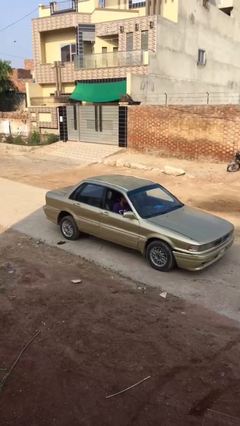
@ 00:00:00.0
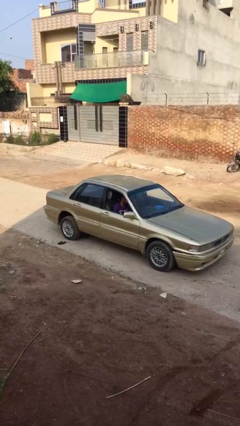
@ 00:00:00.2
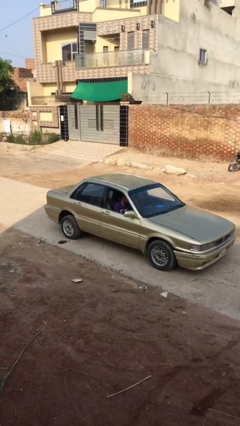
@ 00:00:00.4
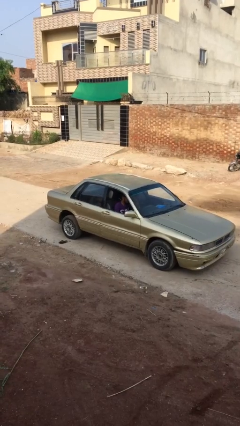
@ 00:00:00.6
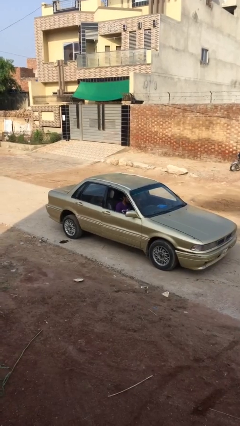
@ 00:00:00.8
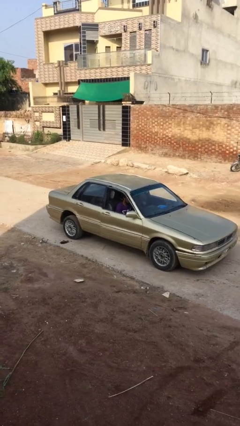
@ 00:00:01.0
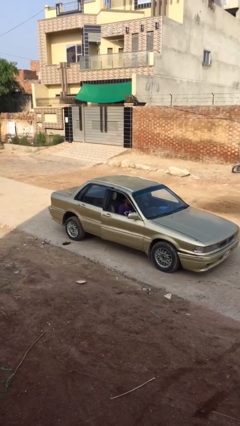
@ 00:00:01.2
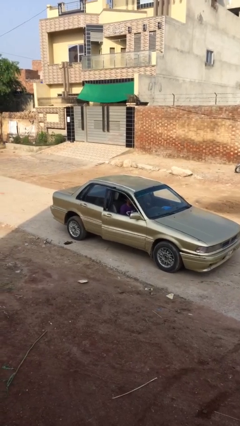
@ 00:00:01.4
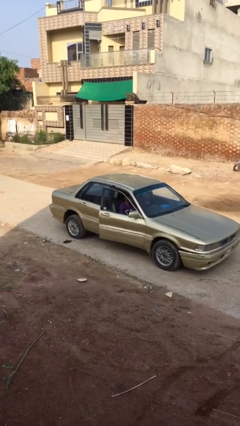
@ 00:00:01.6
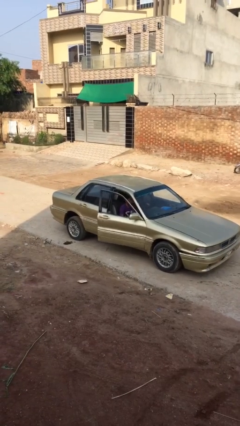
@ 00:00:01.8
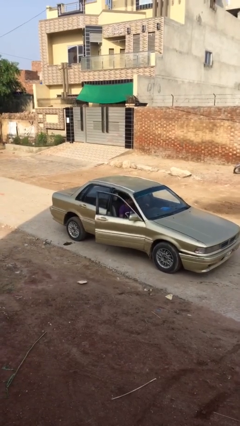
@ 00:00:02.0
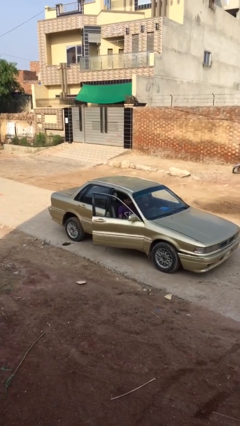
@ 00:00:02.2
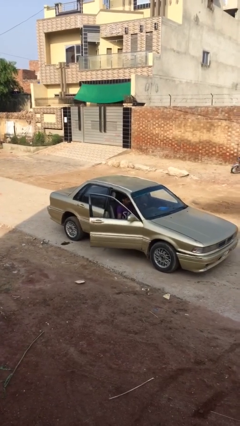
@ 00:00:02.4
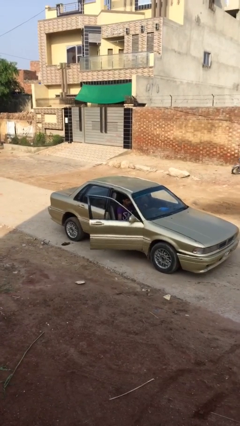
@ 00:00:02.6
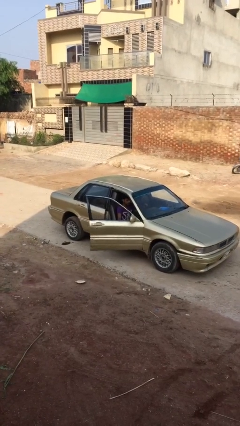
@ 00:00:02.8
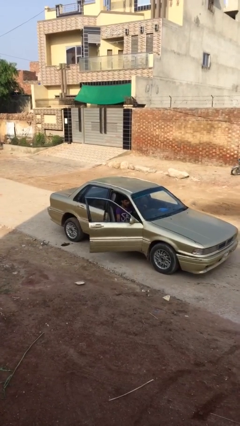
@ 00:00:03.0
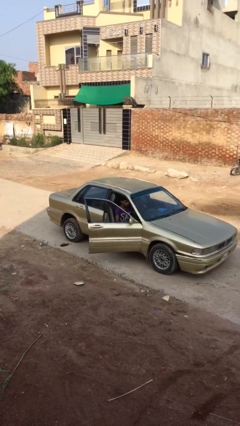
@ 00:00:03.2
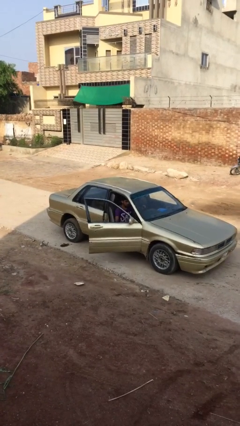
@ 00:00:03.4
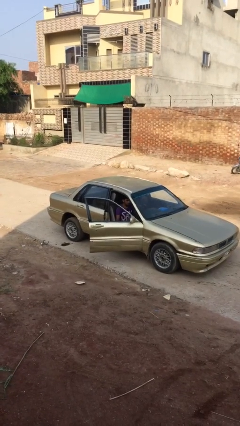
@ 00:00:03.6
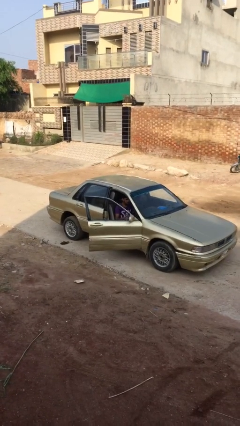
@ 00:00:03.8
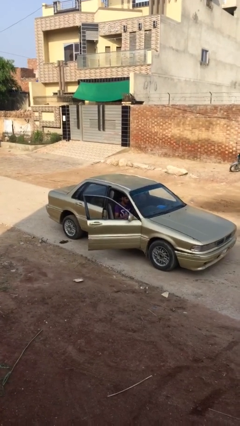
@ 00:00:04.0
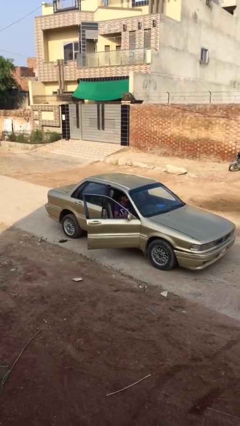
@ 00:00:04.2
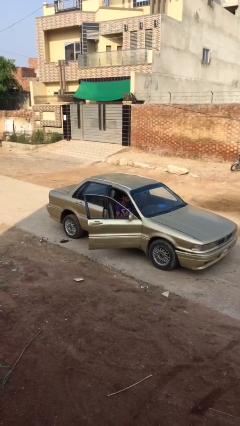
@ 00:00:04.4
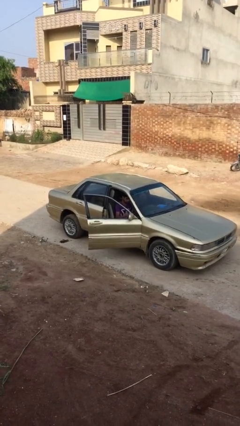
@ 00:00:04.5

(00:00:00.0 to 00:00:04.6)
person opens car door

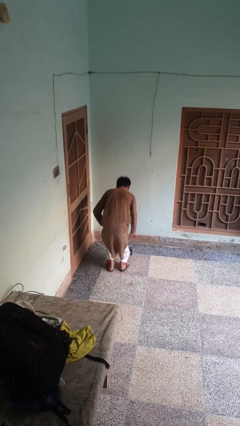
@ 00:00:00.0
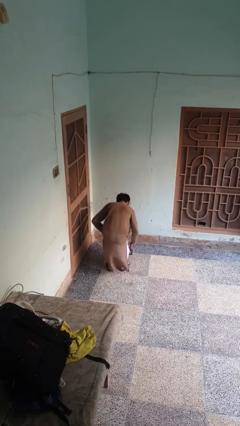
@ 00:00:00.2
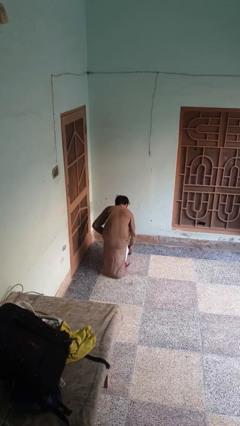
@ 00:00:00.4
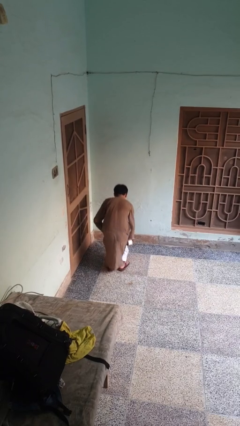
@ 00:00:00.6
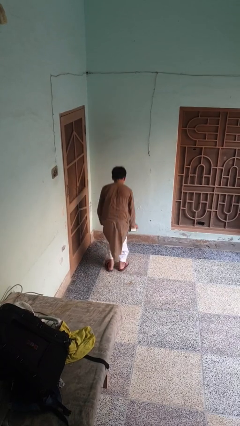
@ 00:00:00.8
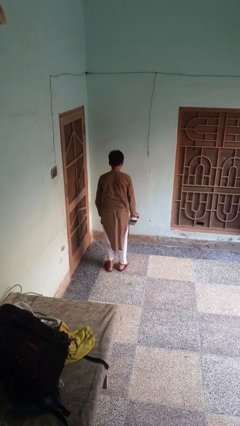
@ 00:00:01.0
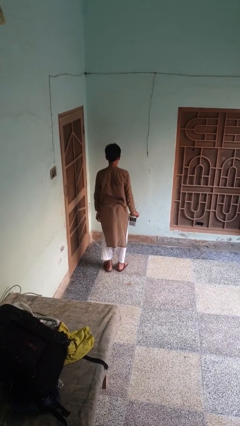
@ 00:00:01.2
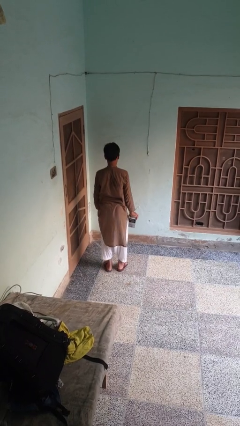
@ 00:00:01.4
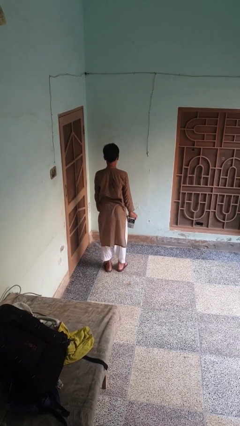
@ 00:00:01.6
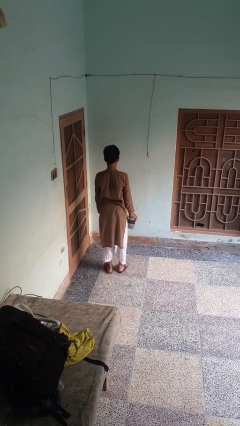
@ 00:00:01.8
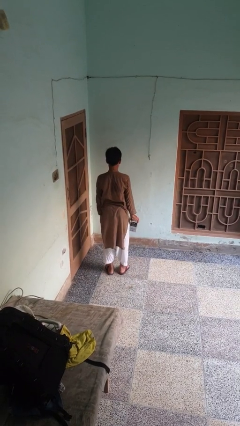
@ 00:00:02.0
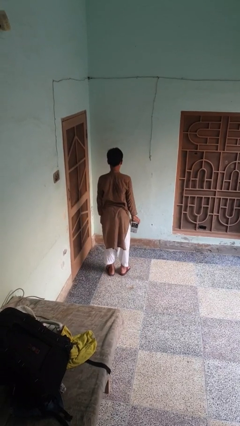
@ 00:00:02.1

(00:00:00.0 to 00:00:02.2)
person picks up object from floor

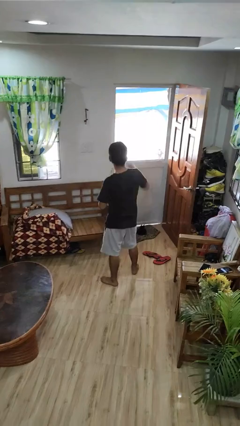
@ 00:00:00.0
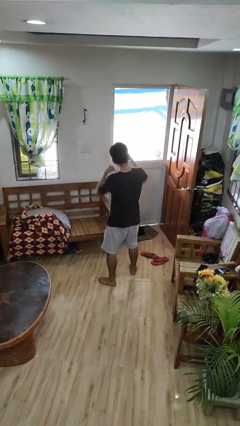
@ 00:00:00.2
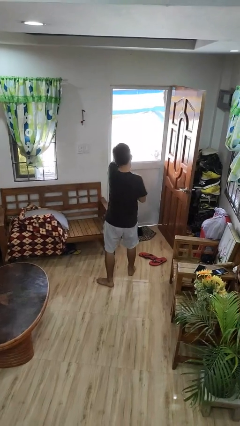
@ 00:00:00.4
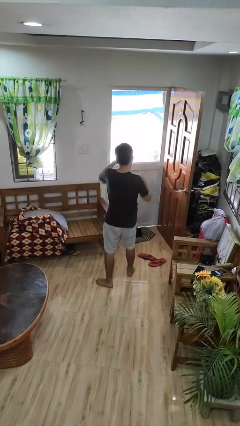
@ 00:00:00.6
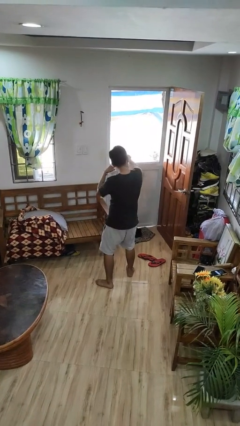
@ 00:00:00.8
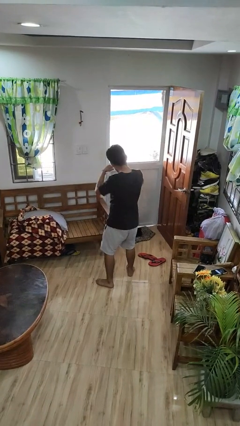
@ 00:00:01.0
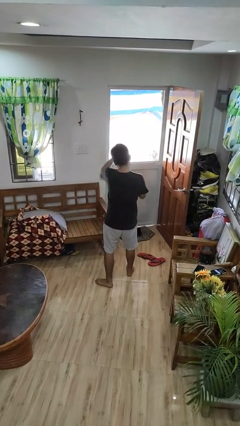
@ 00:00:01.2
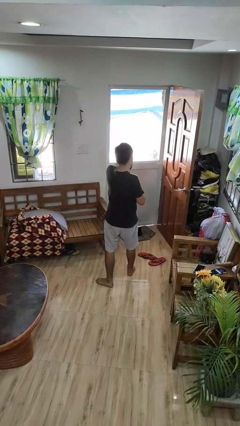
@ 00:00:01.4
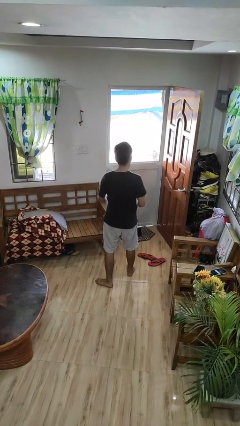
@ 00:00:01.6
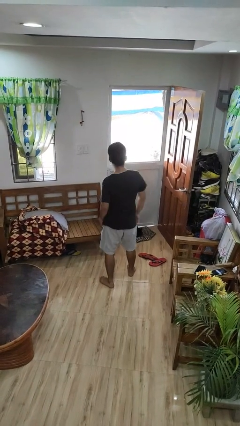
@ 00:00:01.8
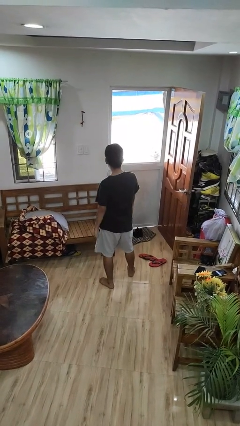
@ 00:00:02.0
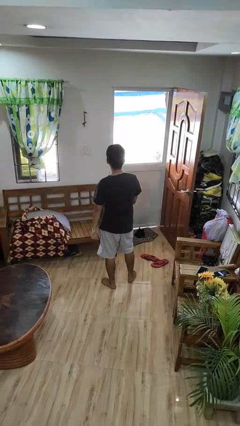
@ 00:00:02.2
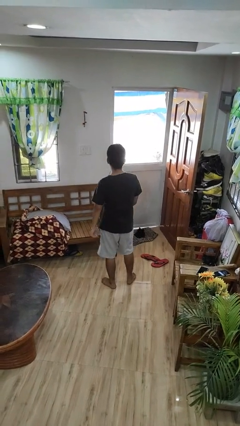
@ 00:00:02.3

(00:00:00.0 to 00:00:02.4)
person punches

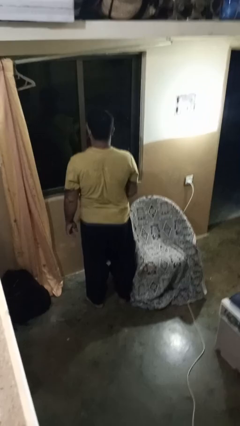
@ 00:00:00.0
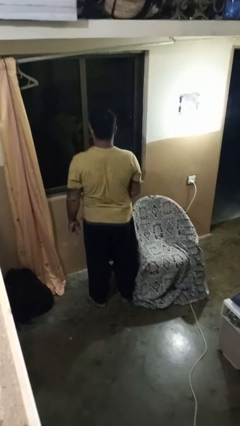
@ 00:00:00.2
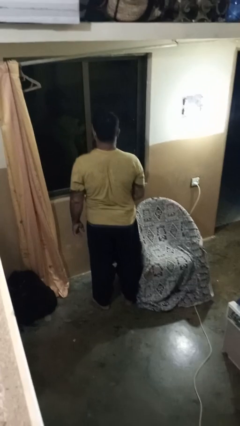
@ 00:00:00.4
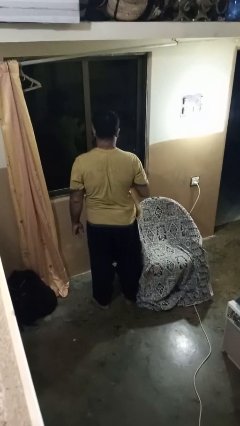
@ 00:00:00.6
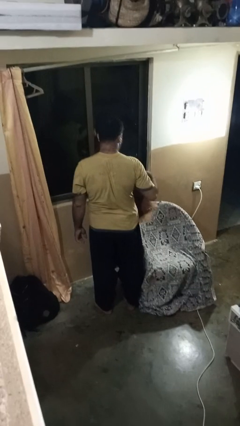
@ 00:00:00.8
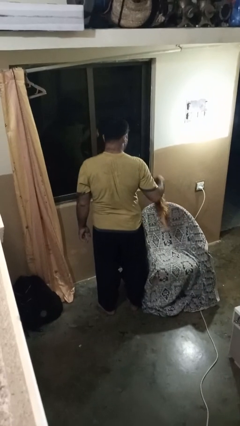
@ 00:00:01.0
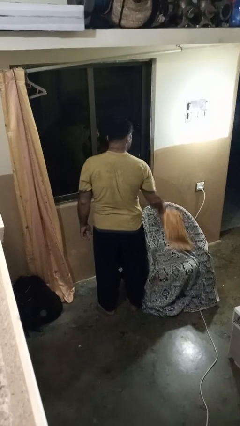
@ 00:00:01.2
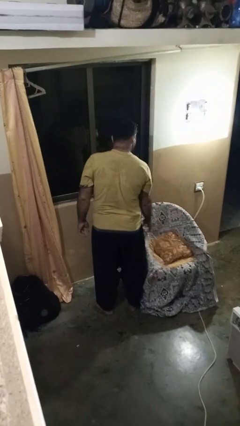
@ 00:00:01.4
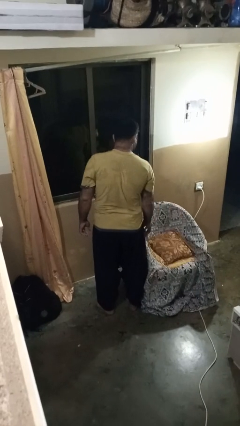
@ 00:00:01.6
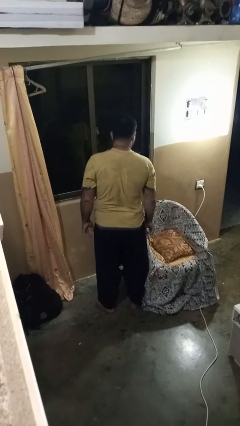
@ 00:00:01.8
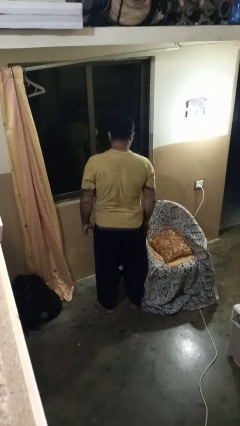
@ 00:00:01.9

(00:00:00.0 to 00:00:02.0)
person puts down object on couch

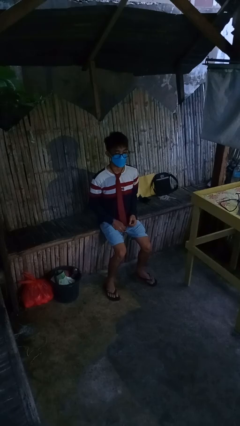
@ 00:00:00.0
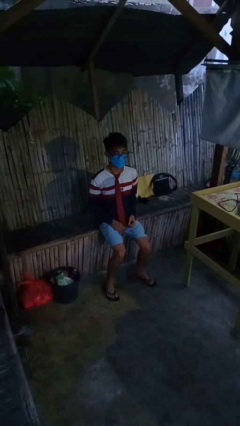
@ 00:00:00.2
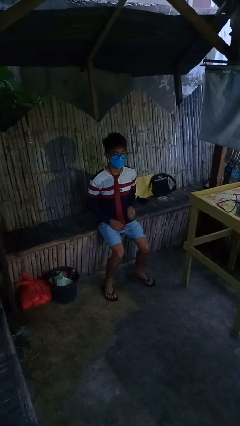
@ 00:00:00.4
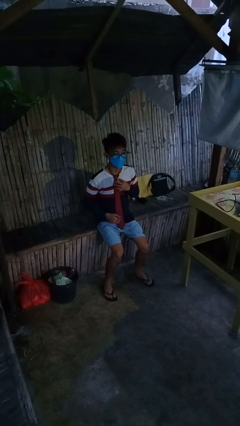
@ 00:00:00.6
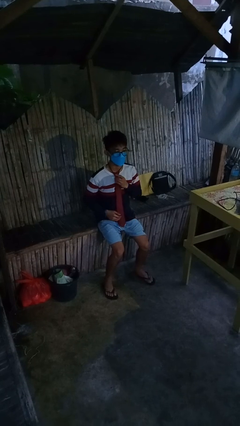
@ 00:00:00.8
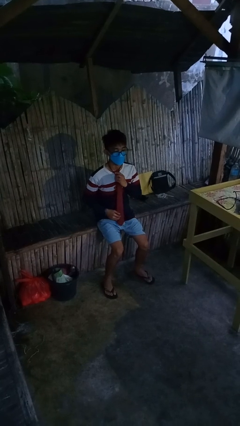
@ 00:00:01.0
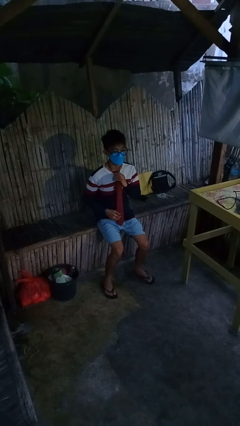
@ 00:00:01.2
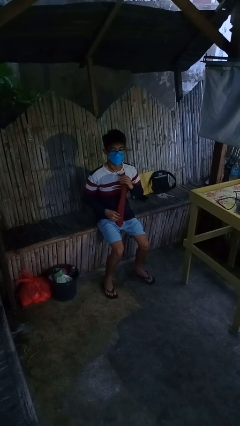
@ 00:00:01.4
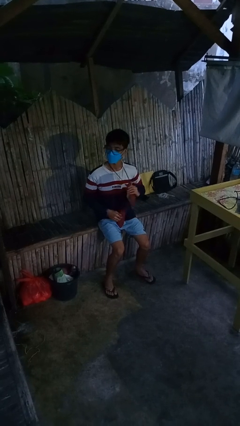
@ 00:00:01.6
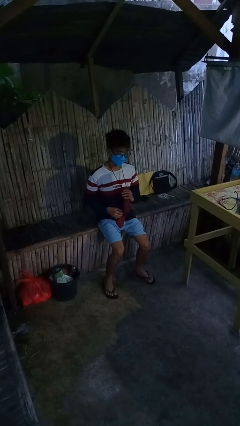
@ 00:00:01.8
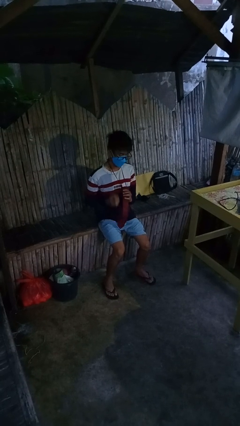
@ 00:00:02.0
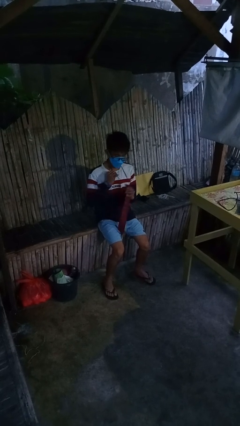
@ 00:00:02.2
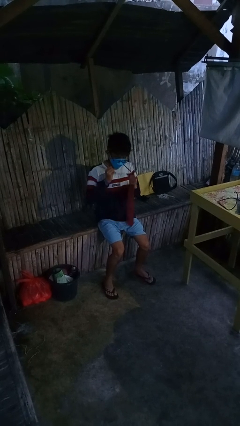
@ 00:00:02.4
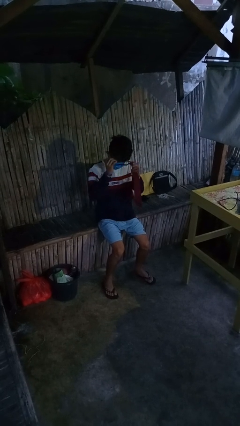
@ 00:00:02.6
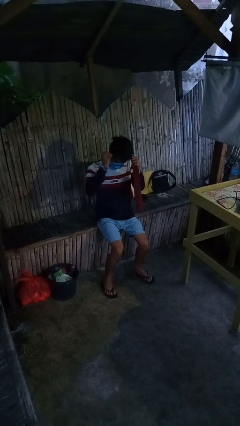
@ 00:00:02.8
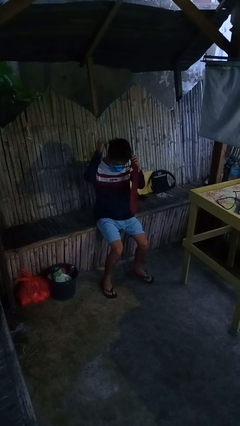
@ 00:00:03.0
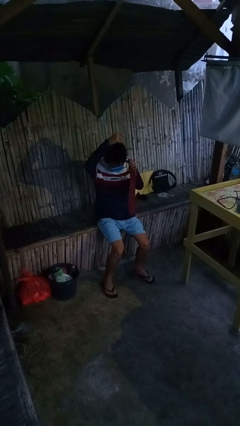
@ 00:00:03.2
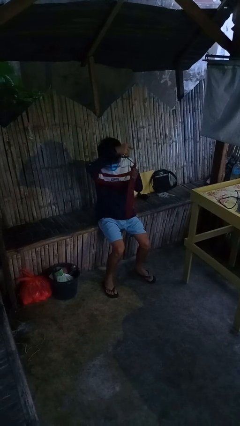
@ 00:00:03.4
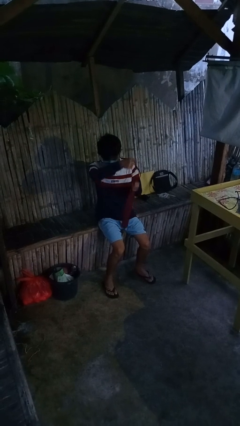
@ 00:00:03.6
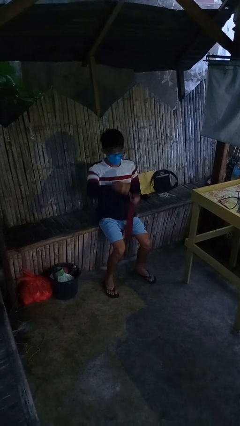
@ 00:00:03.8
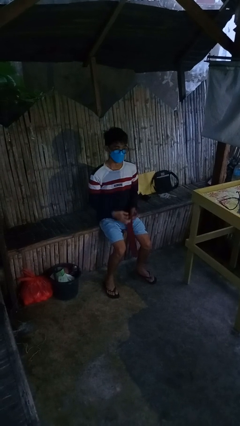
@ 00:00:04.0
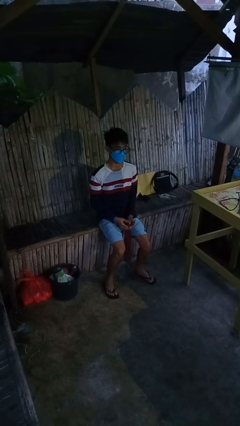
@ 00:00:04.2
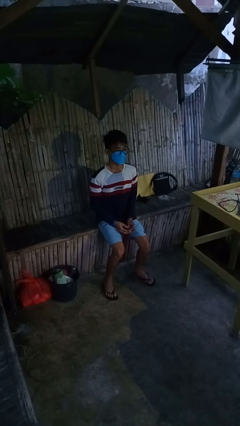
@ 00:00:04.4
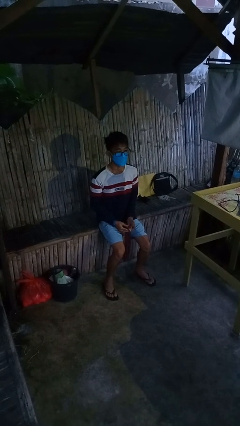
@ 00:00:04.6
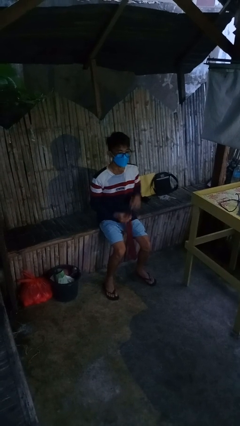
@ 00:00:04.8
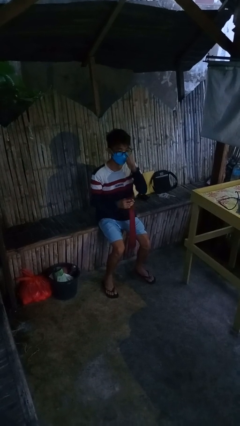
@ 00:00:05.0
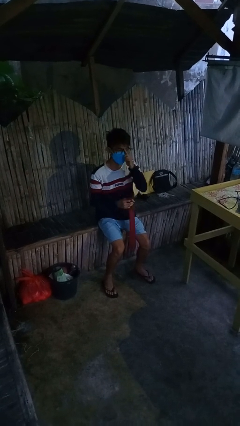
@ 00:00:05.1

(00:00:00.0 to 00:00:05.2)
person takes off necktie

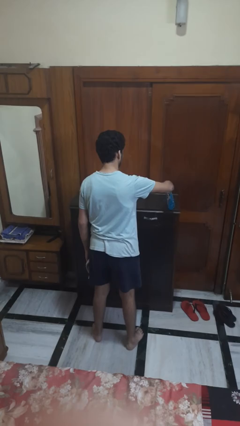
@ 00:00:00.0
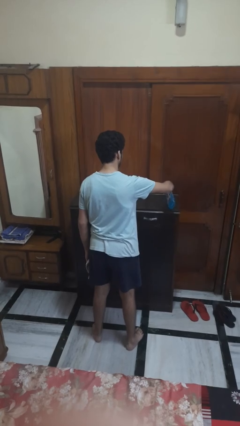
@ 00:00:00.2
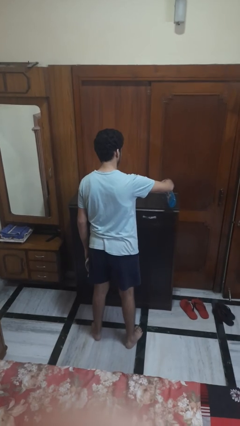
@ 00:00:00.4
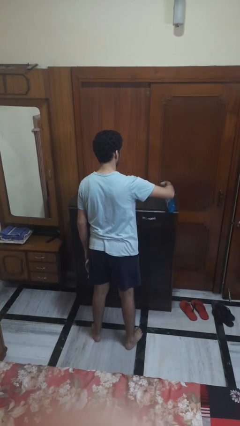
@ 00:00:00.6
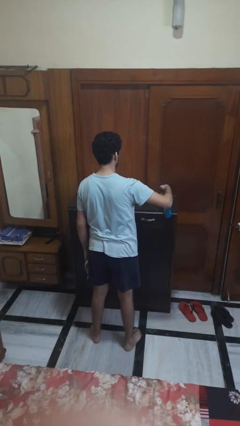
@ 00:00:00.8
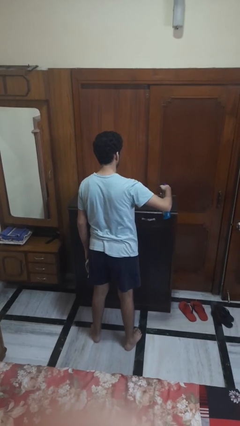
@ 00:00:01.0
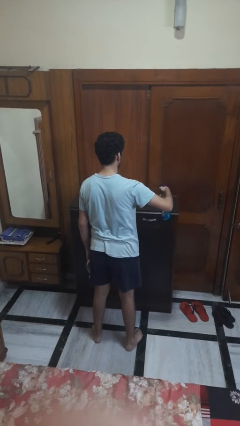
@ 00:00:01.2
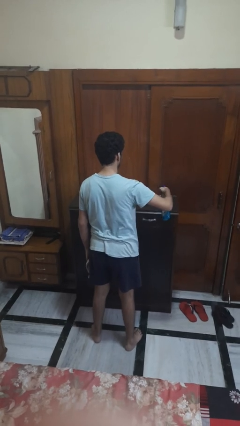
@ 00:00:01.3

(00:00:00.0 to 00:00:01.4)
person sprays from bottle
